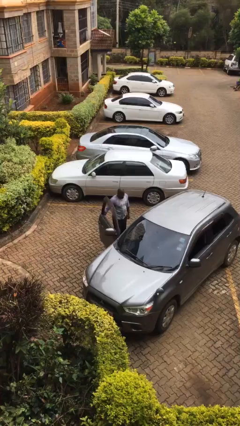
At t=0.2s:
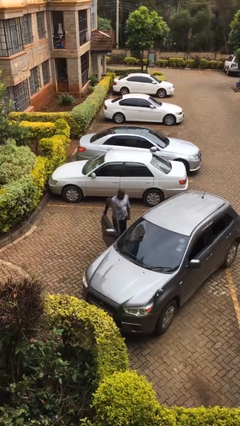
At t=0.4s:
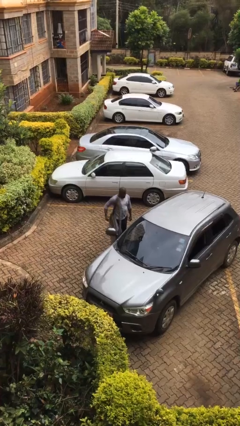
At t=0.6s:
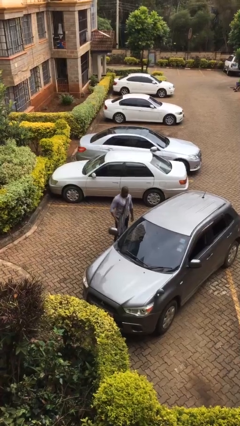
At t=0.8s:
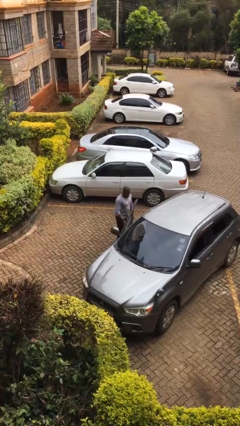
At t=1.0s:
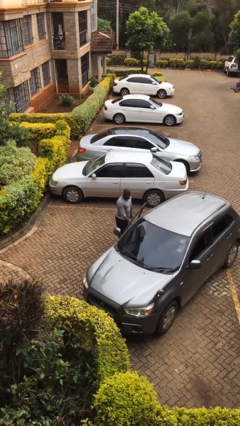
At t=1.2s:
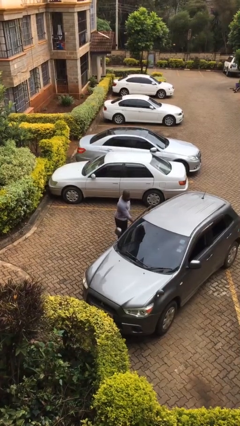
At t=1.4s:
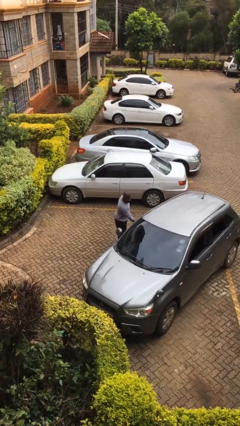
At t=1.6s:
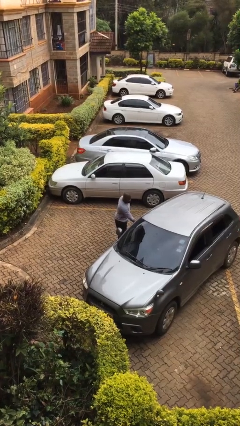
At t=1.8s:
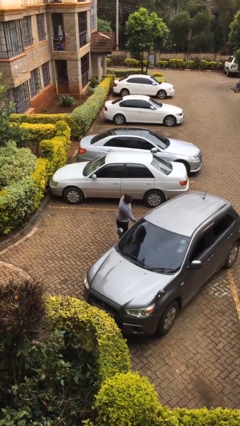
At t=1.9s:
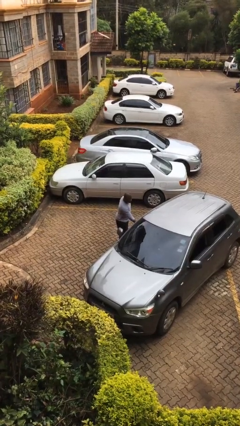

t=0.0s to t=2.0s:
person closes car door

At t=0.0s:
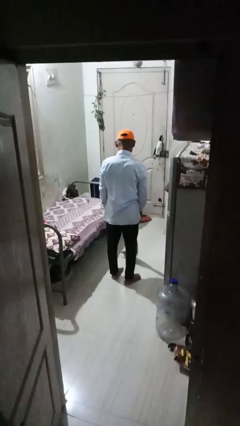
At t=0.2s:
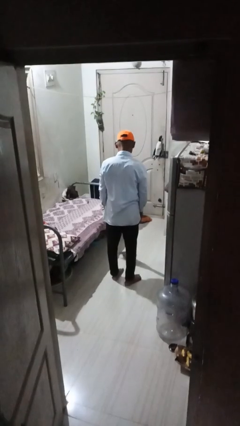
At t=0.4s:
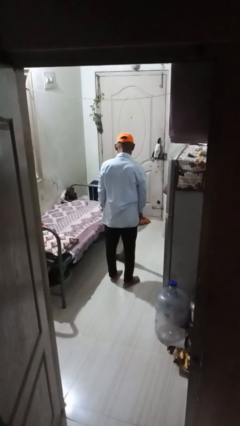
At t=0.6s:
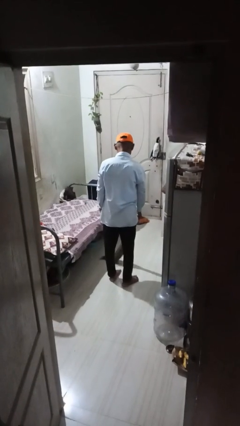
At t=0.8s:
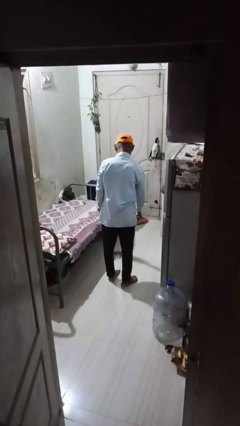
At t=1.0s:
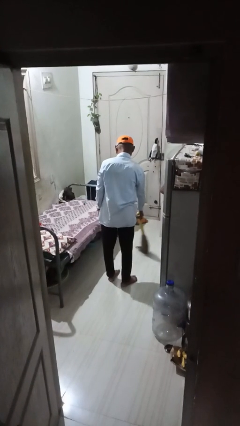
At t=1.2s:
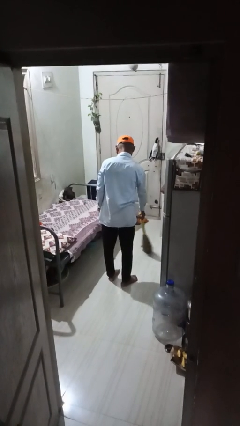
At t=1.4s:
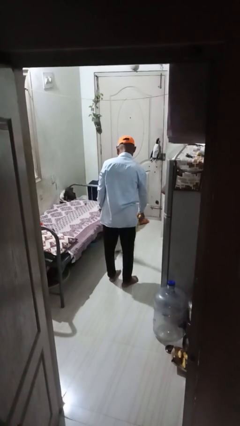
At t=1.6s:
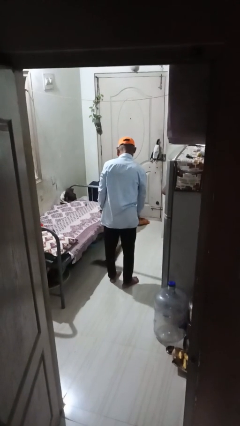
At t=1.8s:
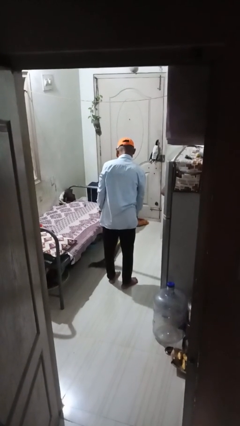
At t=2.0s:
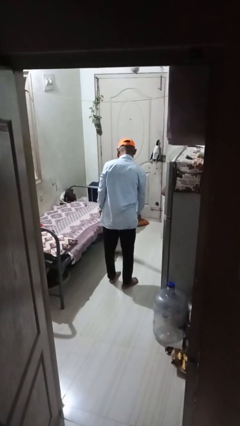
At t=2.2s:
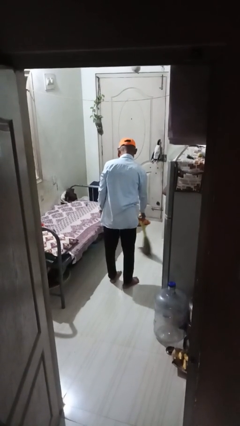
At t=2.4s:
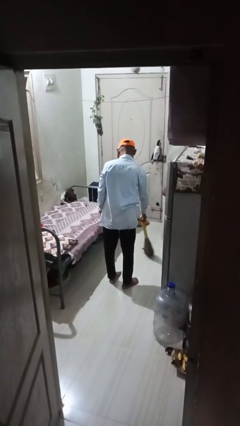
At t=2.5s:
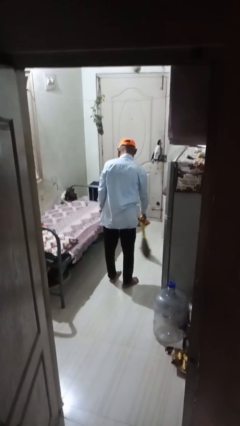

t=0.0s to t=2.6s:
person mops

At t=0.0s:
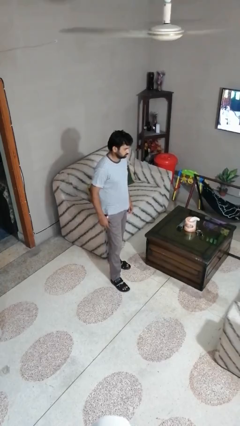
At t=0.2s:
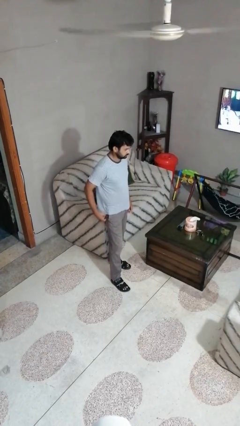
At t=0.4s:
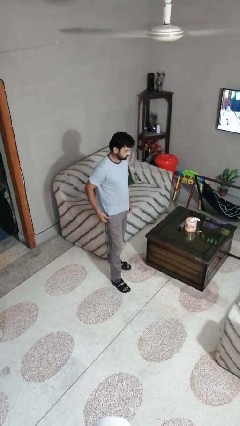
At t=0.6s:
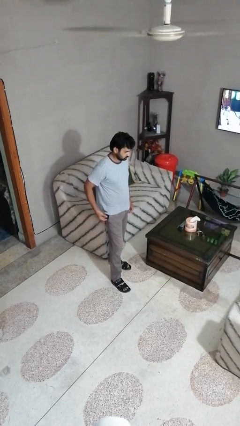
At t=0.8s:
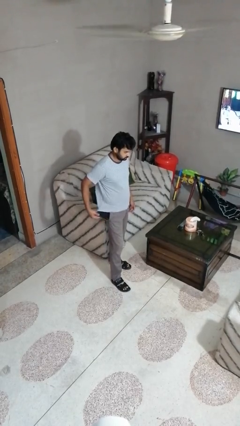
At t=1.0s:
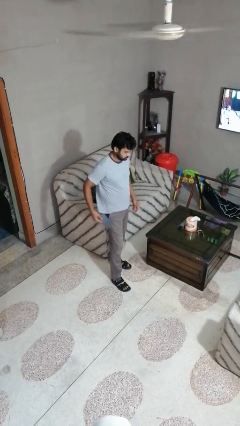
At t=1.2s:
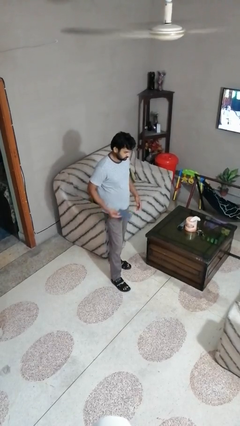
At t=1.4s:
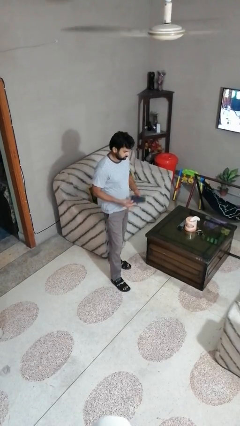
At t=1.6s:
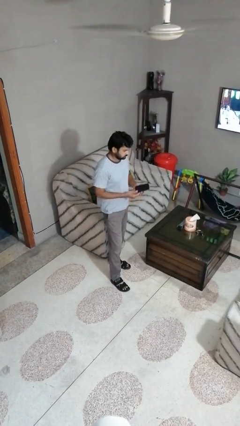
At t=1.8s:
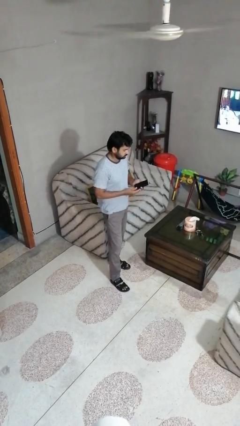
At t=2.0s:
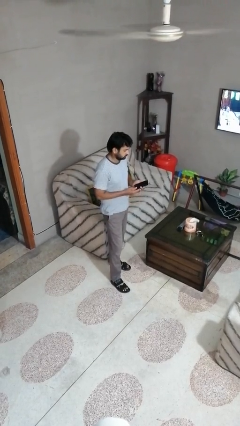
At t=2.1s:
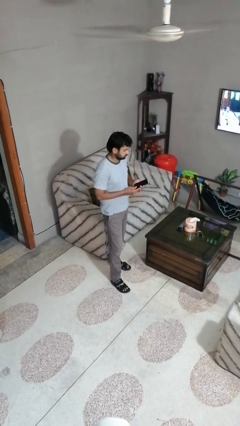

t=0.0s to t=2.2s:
person takes phone from pocket

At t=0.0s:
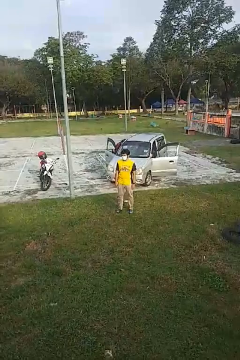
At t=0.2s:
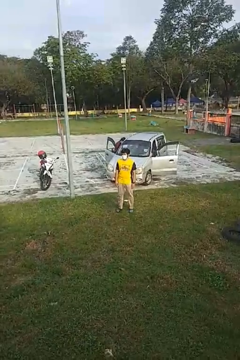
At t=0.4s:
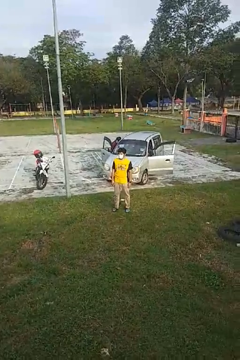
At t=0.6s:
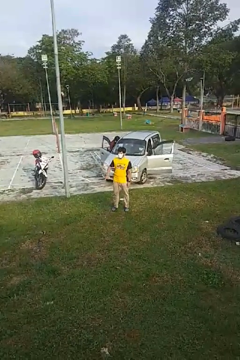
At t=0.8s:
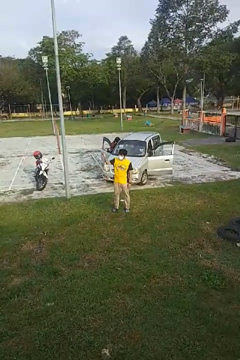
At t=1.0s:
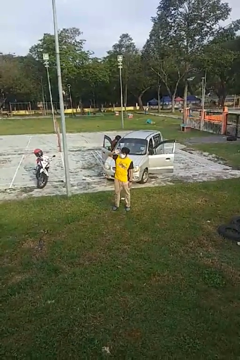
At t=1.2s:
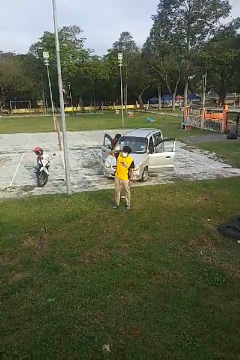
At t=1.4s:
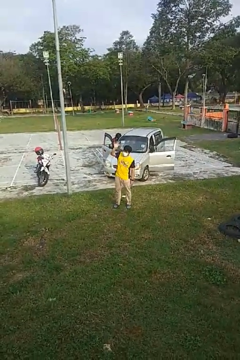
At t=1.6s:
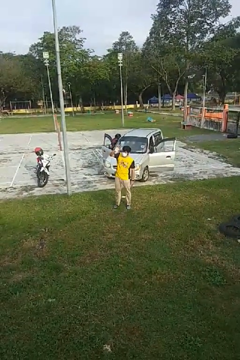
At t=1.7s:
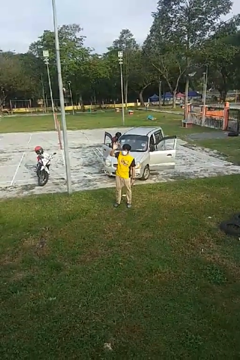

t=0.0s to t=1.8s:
person waves at person

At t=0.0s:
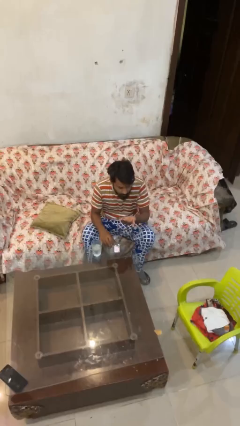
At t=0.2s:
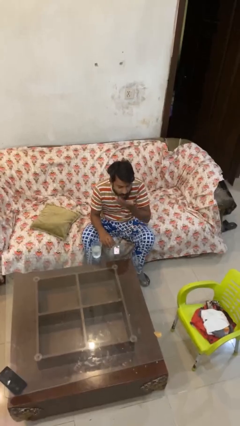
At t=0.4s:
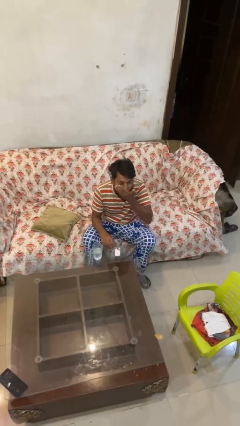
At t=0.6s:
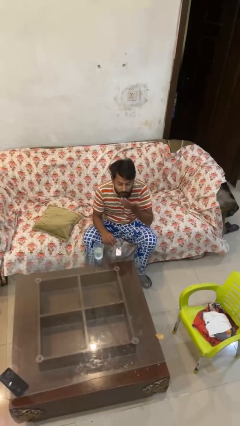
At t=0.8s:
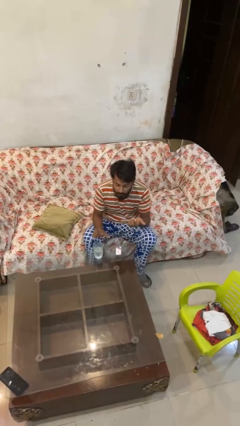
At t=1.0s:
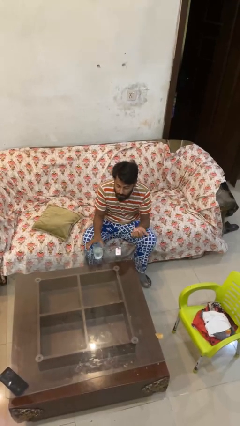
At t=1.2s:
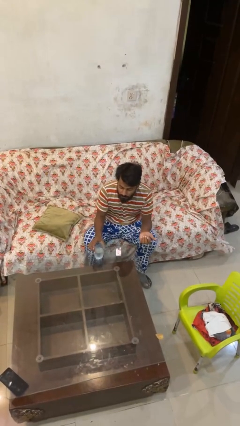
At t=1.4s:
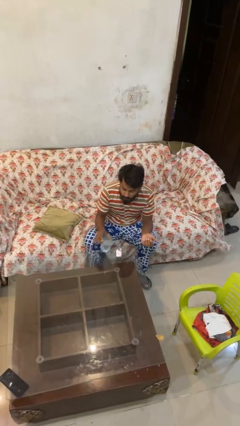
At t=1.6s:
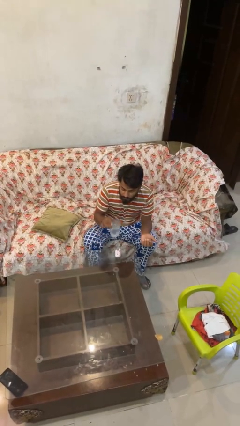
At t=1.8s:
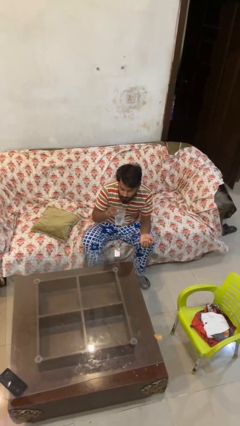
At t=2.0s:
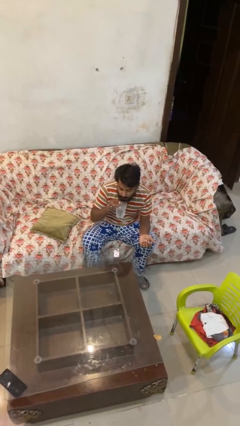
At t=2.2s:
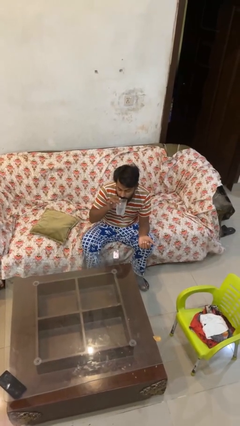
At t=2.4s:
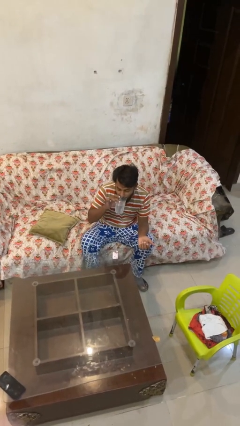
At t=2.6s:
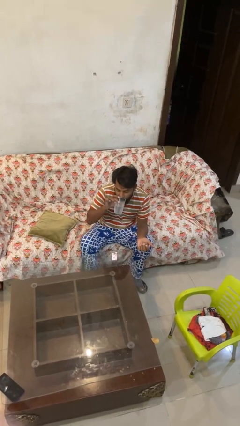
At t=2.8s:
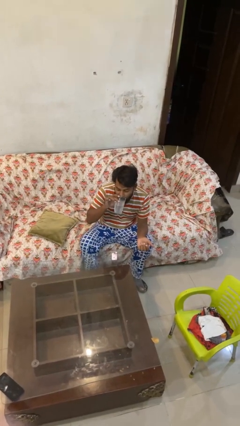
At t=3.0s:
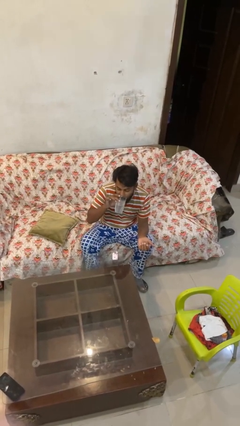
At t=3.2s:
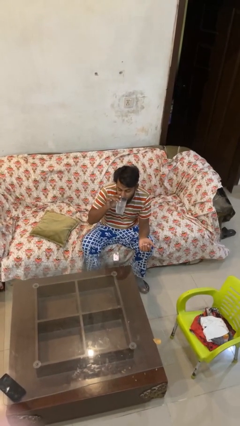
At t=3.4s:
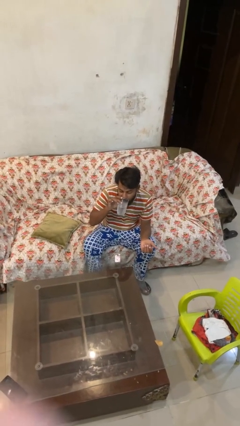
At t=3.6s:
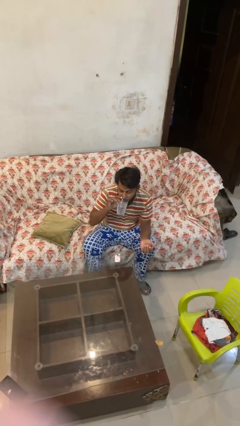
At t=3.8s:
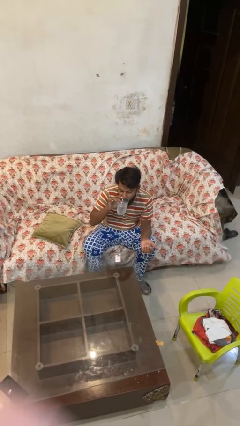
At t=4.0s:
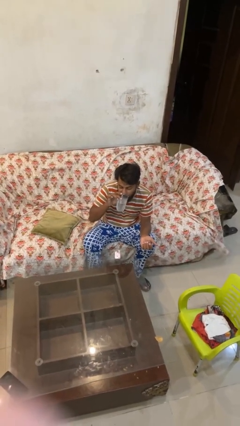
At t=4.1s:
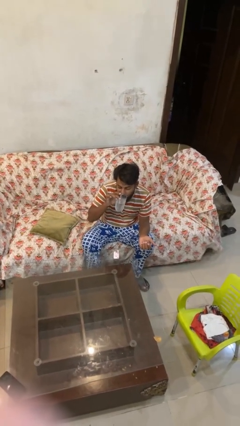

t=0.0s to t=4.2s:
person drinks from cup

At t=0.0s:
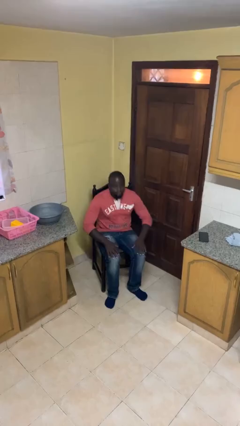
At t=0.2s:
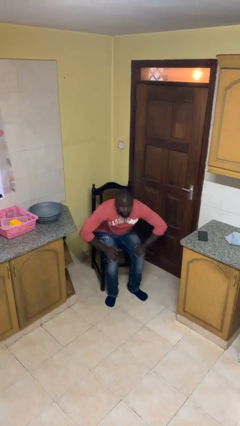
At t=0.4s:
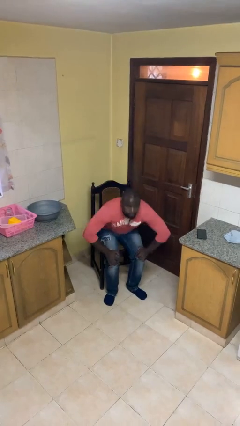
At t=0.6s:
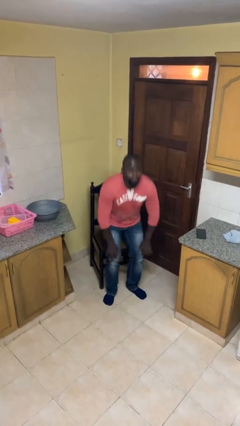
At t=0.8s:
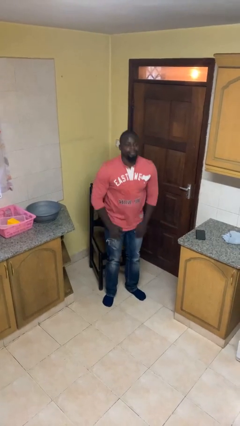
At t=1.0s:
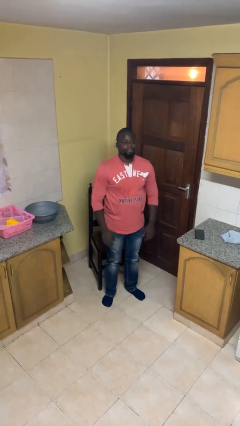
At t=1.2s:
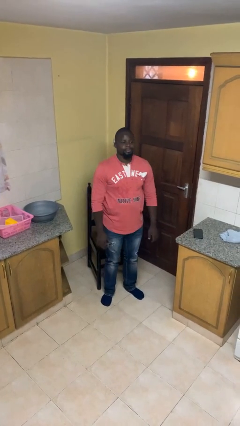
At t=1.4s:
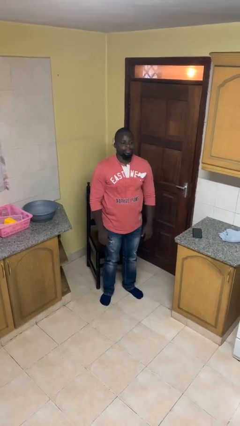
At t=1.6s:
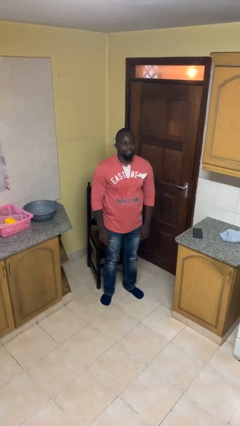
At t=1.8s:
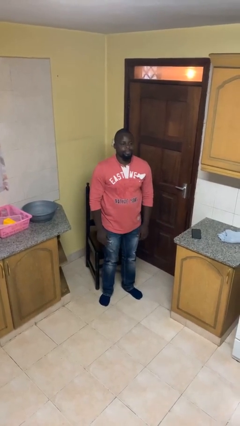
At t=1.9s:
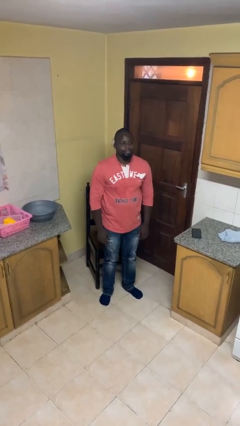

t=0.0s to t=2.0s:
person stands up

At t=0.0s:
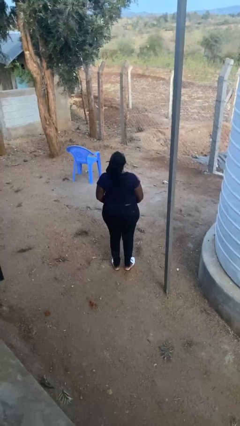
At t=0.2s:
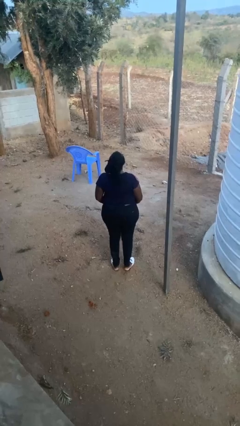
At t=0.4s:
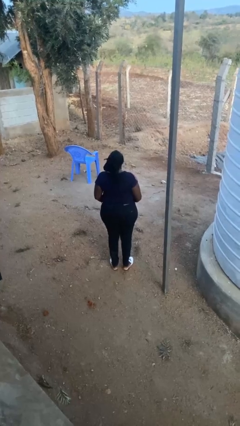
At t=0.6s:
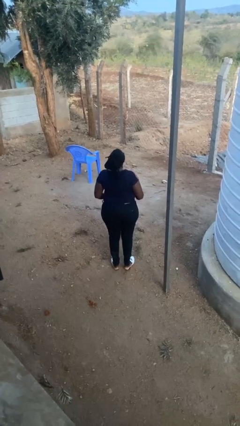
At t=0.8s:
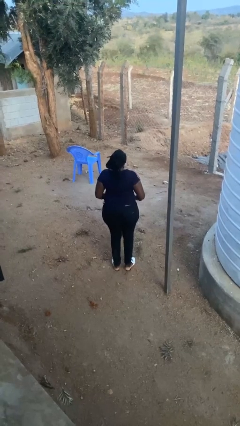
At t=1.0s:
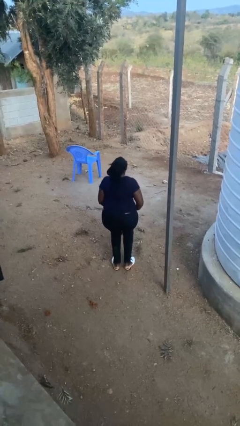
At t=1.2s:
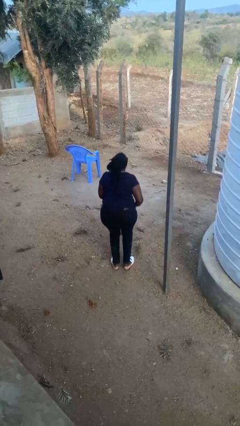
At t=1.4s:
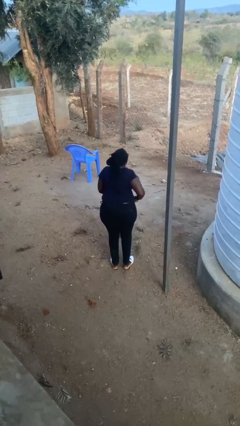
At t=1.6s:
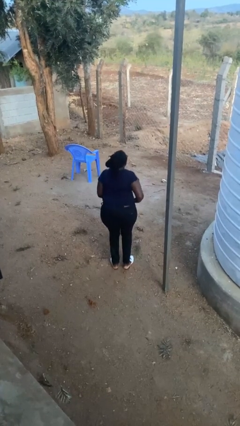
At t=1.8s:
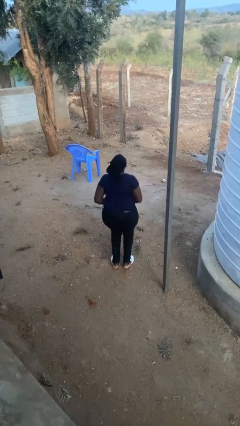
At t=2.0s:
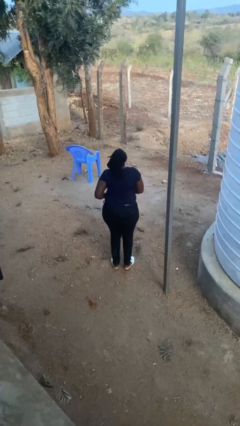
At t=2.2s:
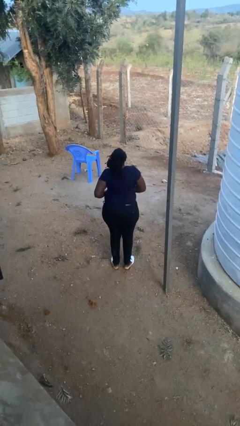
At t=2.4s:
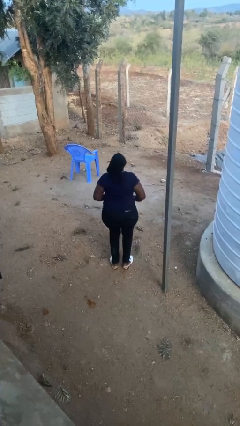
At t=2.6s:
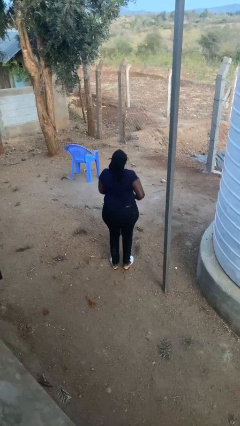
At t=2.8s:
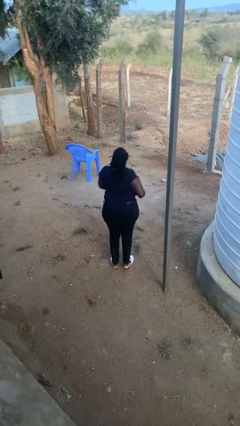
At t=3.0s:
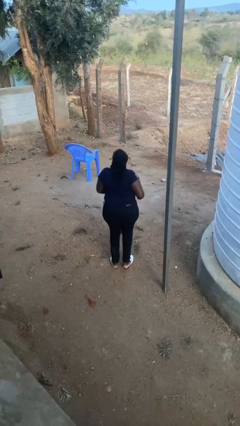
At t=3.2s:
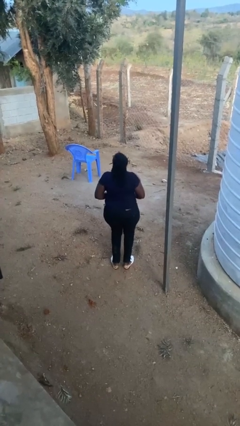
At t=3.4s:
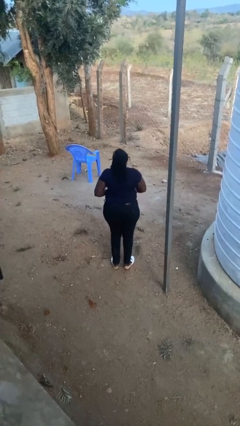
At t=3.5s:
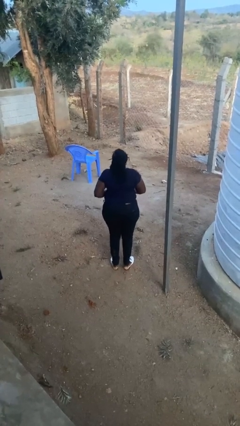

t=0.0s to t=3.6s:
person dances in place
